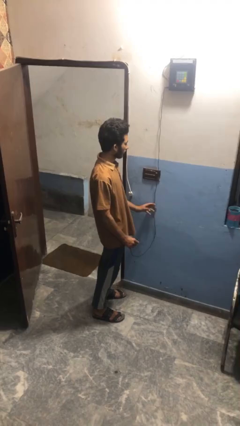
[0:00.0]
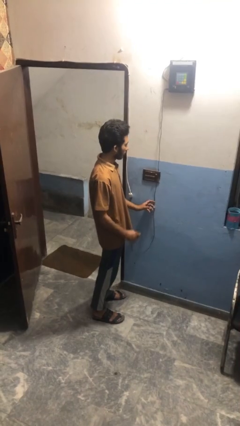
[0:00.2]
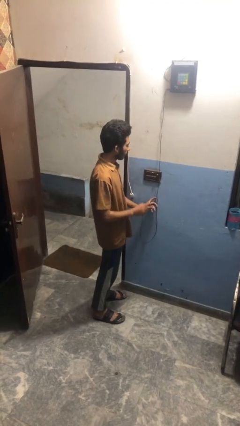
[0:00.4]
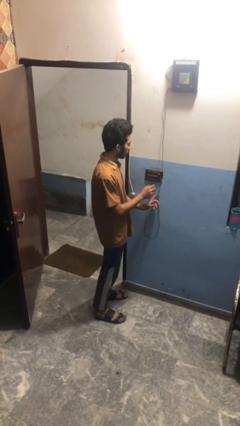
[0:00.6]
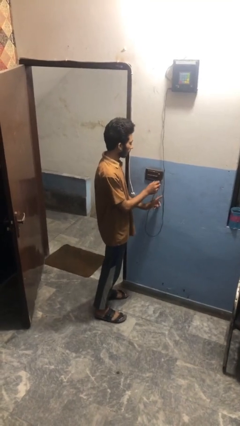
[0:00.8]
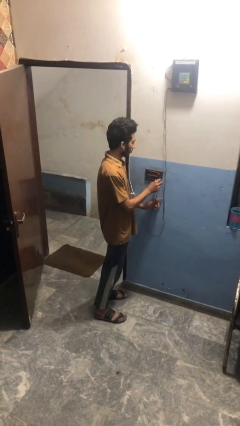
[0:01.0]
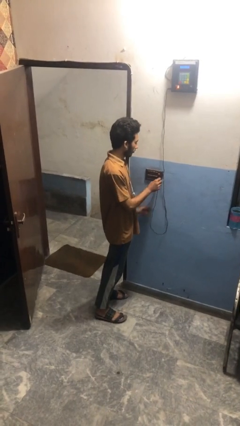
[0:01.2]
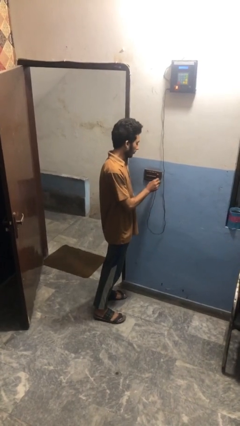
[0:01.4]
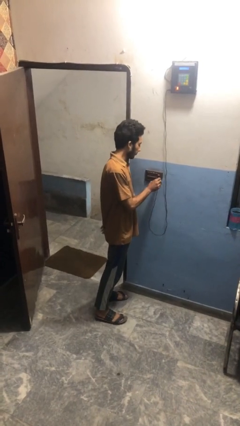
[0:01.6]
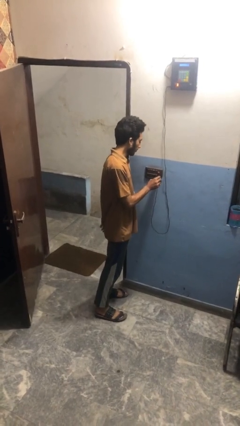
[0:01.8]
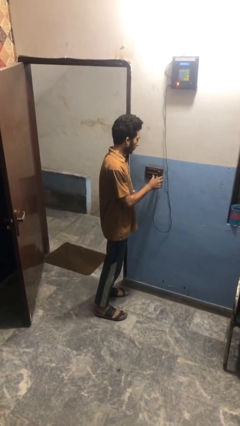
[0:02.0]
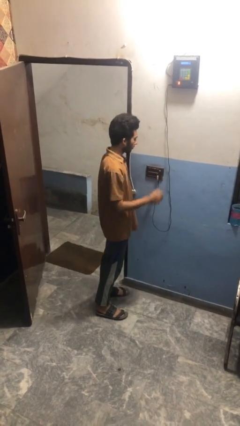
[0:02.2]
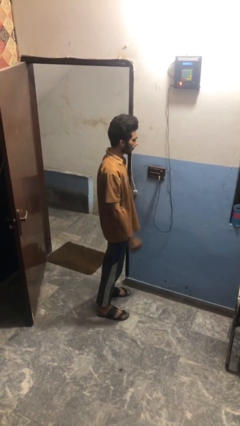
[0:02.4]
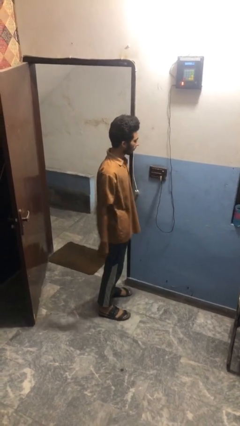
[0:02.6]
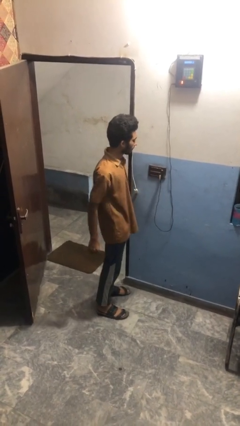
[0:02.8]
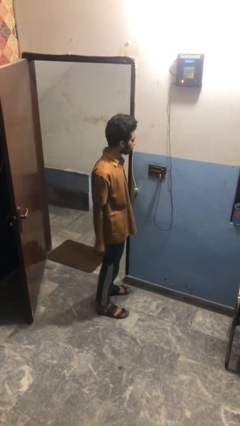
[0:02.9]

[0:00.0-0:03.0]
person plugs into electrical socket

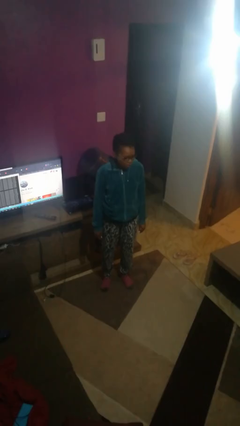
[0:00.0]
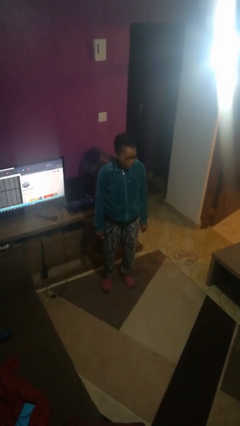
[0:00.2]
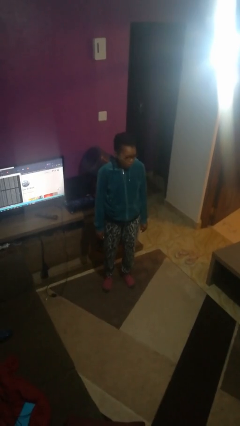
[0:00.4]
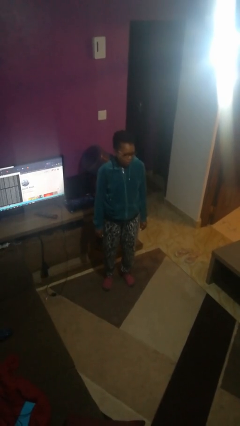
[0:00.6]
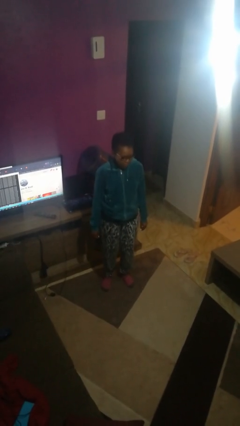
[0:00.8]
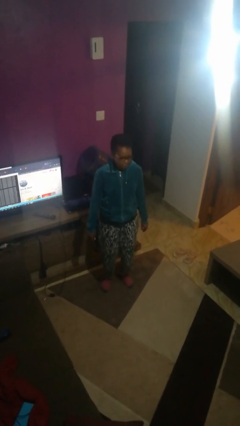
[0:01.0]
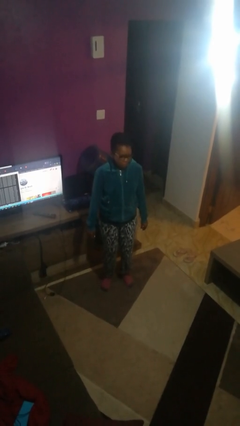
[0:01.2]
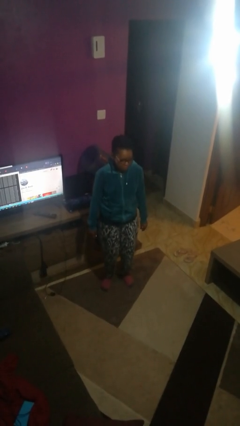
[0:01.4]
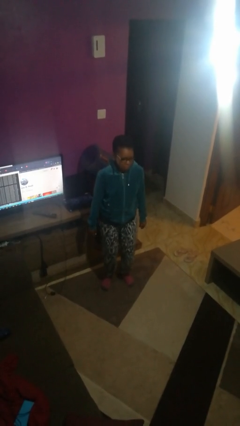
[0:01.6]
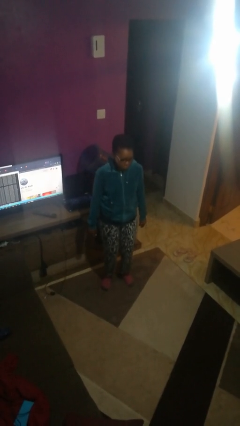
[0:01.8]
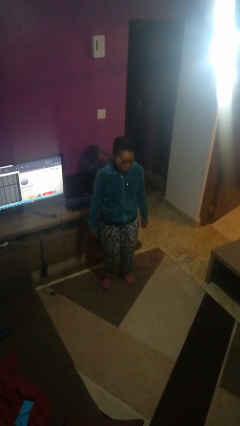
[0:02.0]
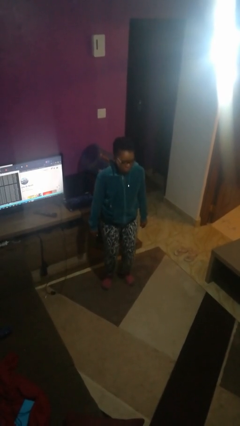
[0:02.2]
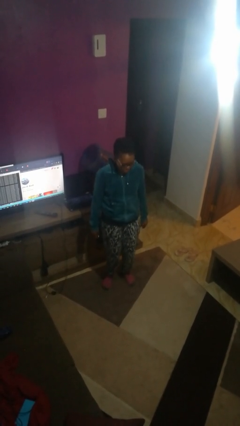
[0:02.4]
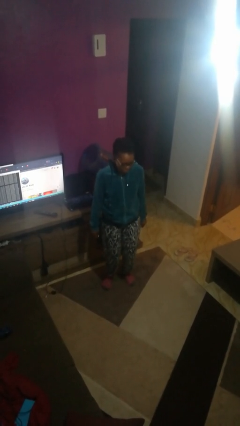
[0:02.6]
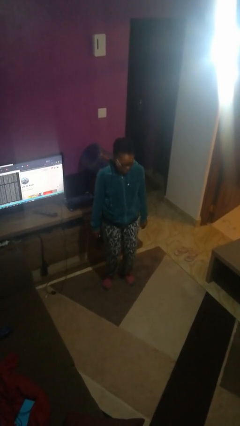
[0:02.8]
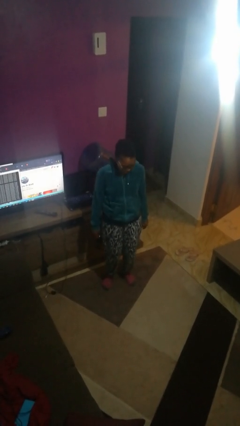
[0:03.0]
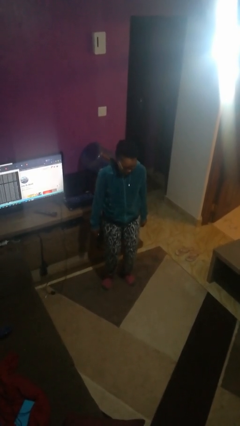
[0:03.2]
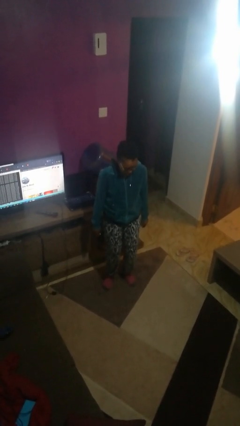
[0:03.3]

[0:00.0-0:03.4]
person wiggles hips

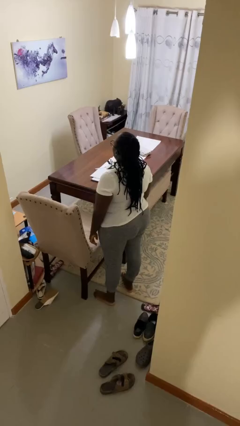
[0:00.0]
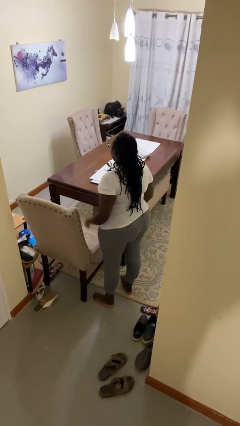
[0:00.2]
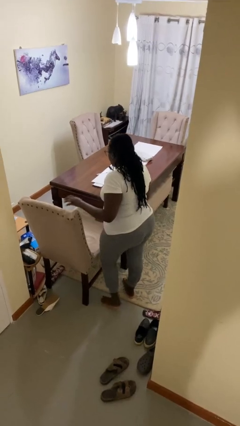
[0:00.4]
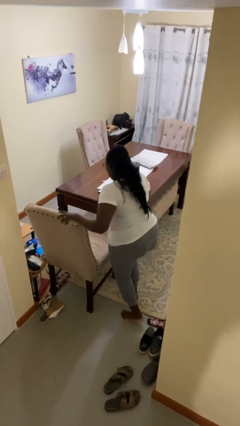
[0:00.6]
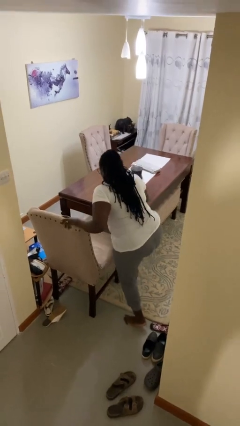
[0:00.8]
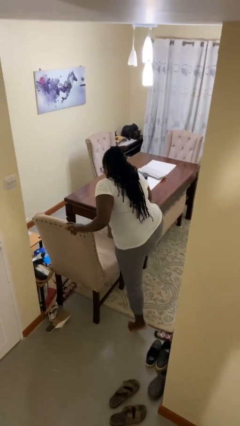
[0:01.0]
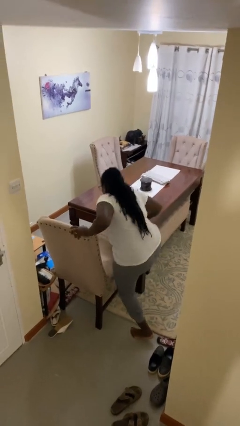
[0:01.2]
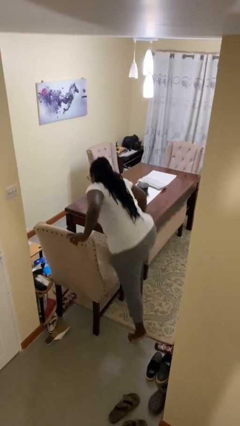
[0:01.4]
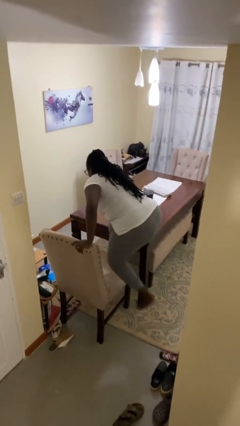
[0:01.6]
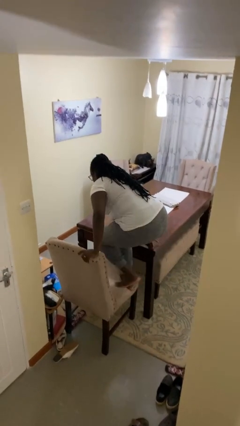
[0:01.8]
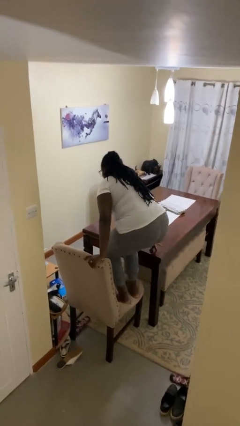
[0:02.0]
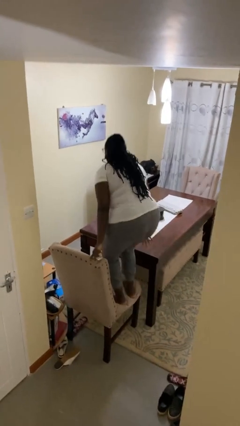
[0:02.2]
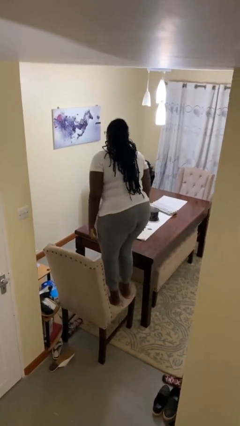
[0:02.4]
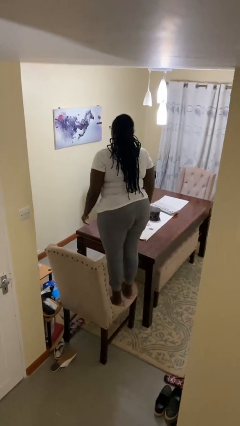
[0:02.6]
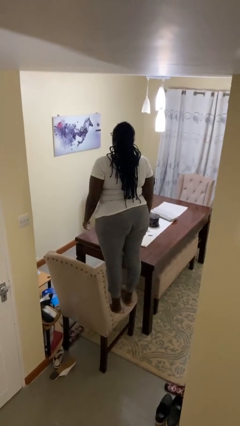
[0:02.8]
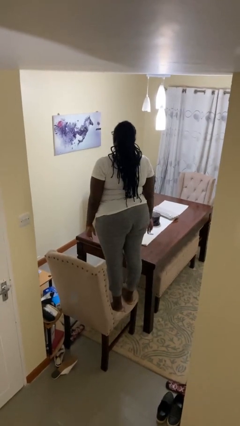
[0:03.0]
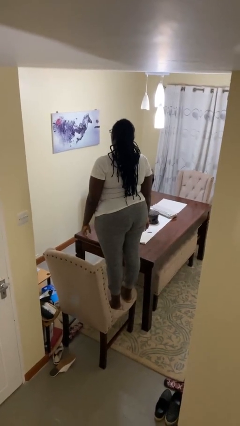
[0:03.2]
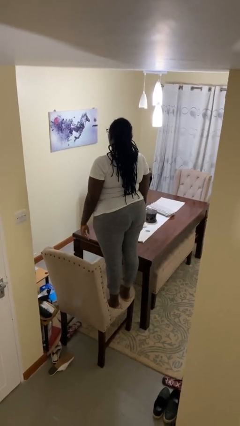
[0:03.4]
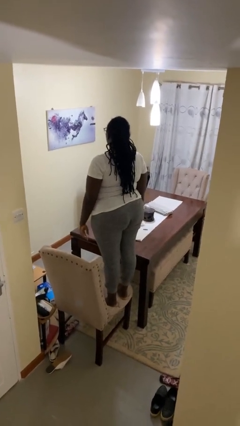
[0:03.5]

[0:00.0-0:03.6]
person climbs on chair

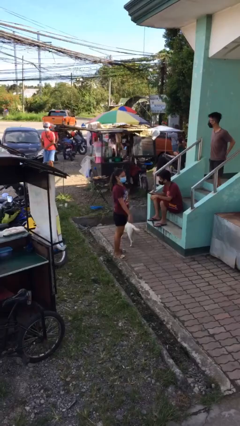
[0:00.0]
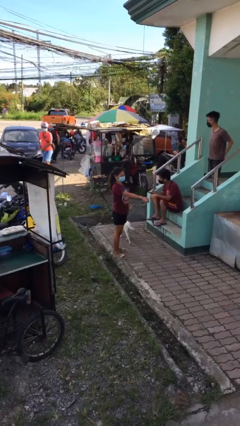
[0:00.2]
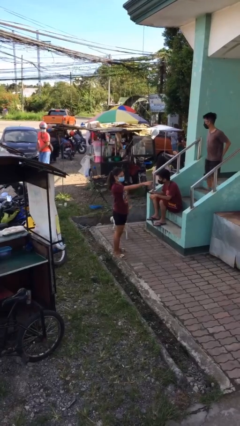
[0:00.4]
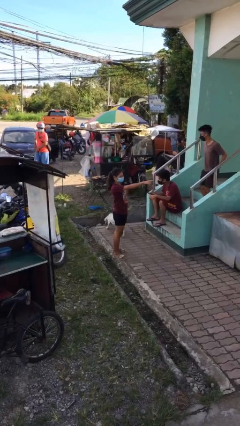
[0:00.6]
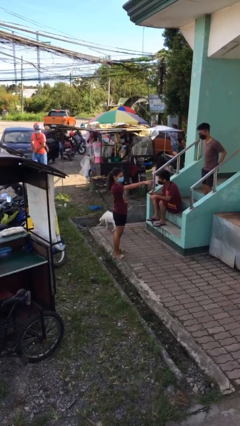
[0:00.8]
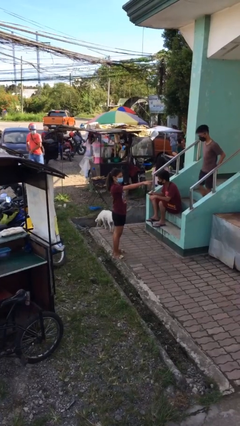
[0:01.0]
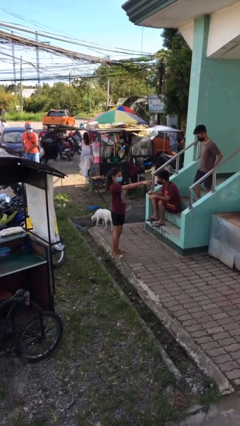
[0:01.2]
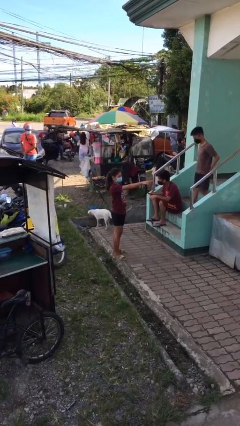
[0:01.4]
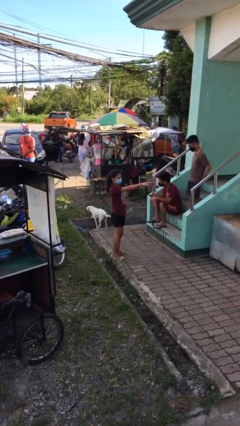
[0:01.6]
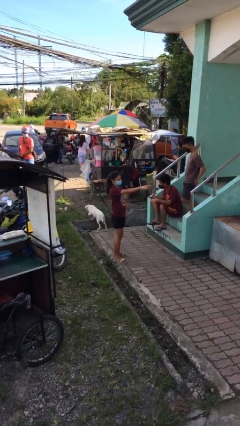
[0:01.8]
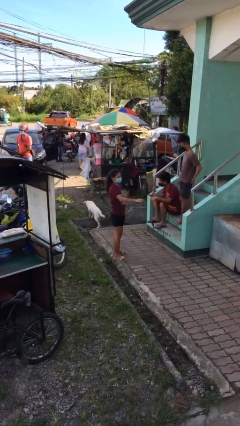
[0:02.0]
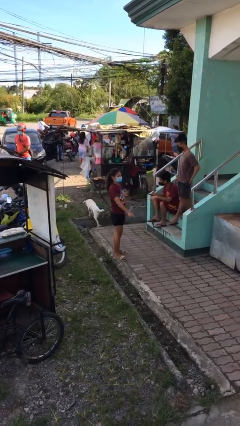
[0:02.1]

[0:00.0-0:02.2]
person points at person

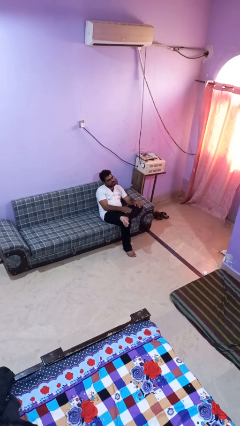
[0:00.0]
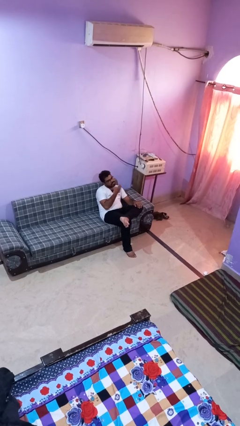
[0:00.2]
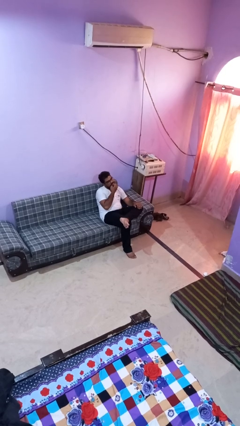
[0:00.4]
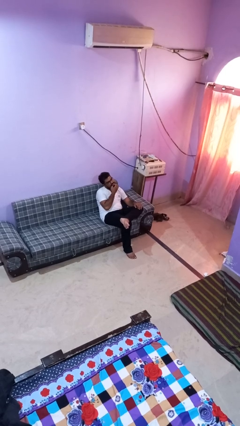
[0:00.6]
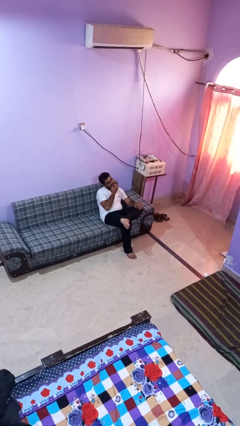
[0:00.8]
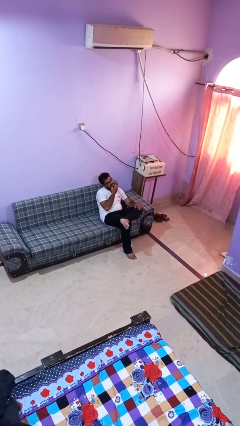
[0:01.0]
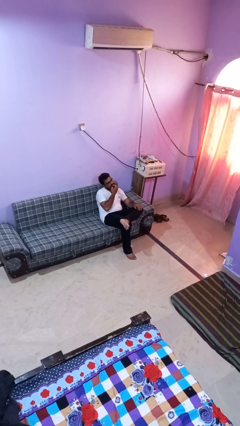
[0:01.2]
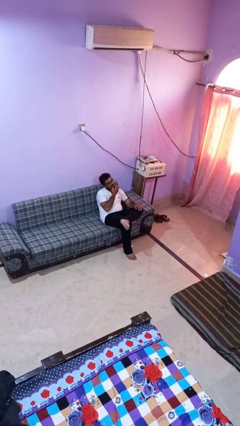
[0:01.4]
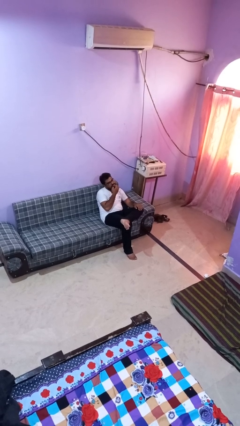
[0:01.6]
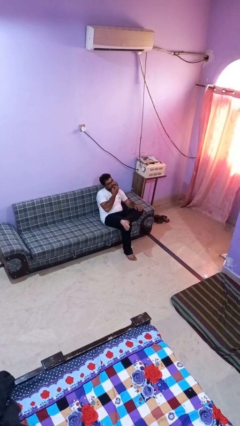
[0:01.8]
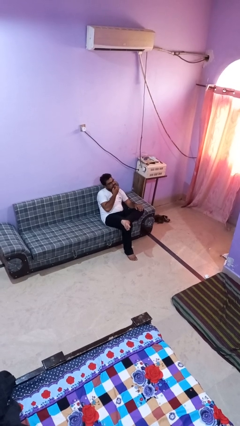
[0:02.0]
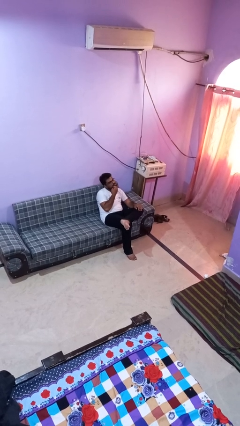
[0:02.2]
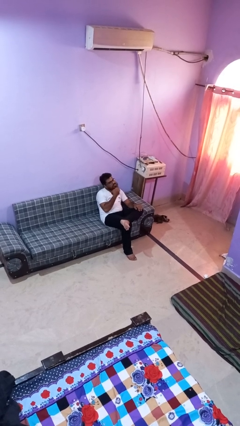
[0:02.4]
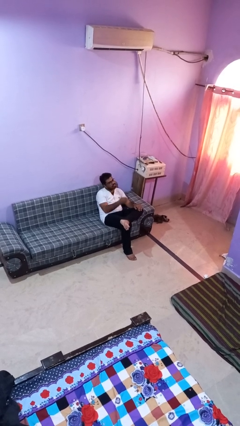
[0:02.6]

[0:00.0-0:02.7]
person strokes chin

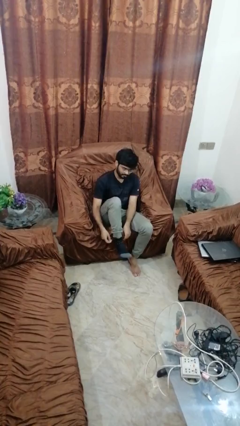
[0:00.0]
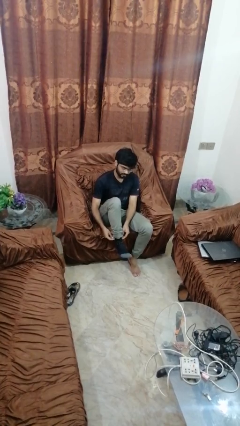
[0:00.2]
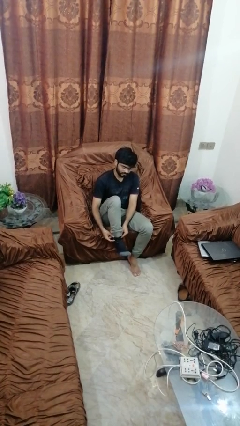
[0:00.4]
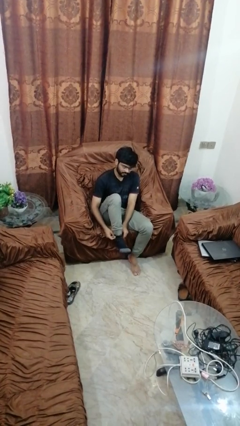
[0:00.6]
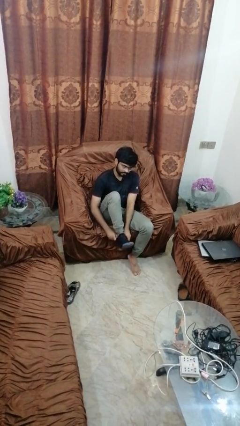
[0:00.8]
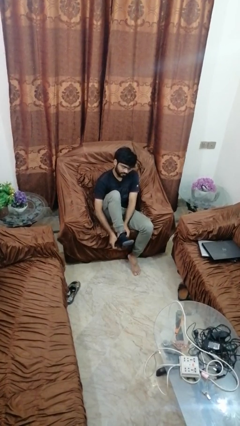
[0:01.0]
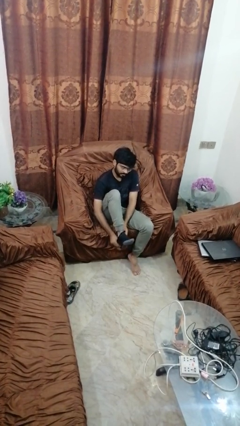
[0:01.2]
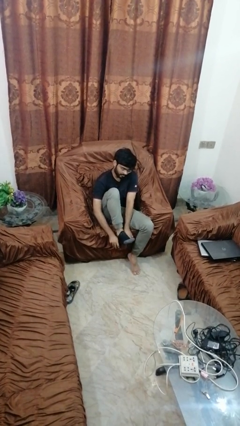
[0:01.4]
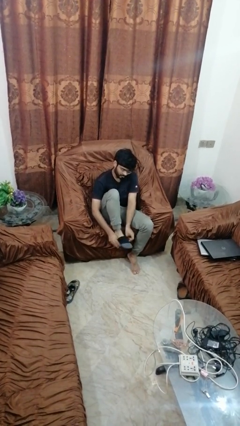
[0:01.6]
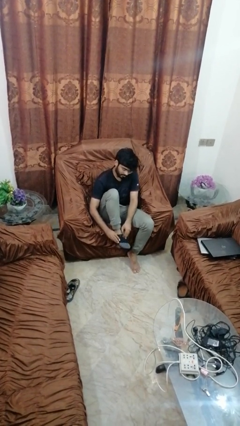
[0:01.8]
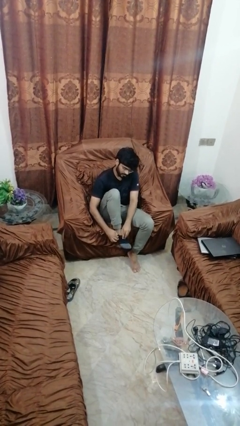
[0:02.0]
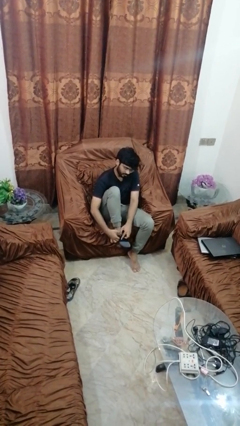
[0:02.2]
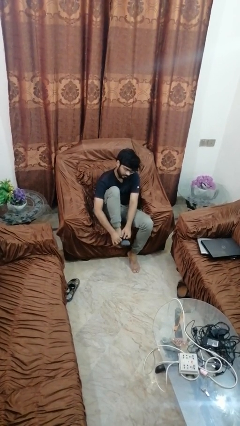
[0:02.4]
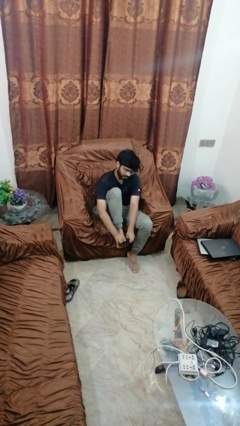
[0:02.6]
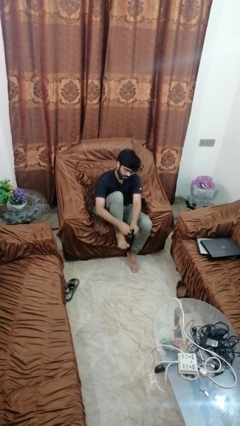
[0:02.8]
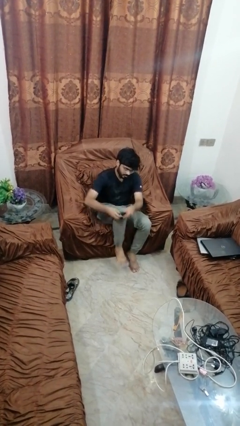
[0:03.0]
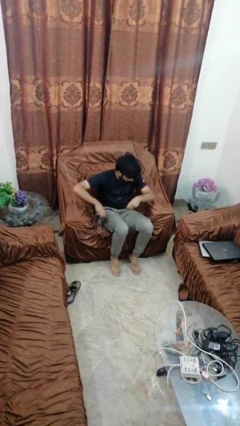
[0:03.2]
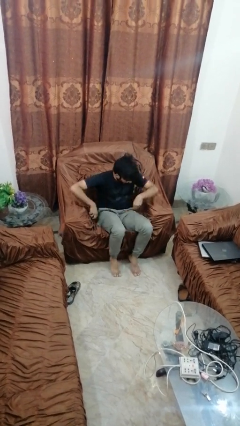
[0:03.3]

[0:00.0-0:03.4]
person takes off socks
